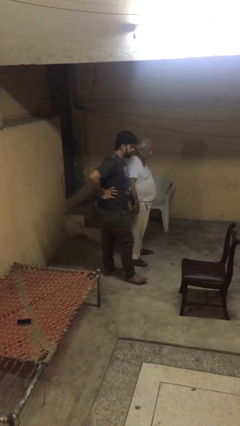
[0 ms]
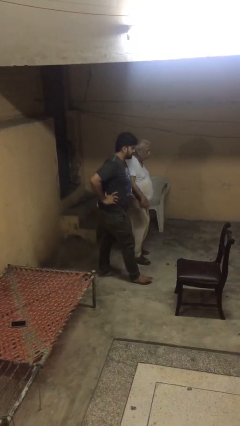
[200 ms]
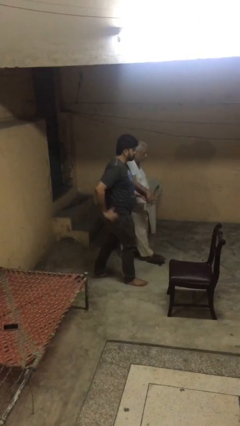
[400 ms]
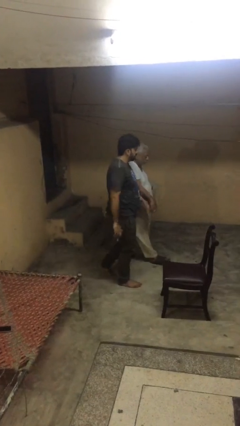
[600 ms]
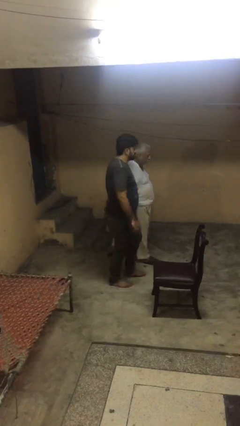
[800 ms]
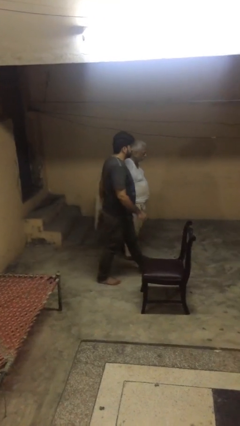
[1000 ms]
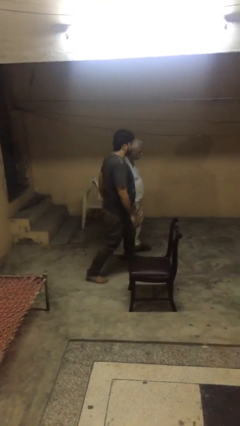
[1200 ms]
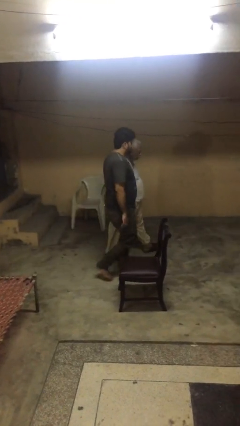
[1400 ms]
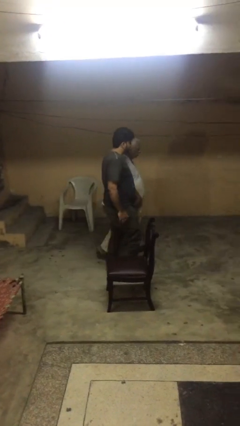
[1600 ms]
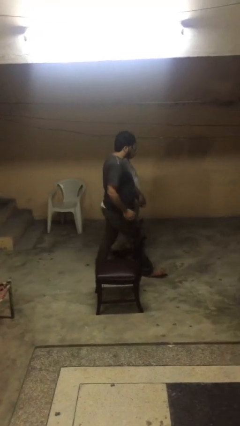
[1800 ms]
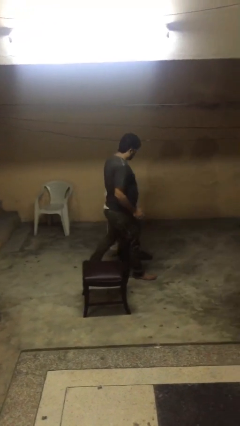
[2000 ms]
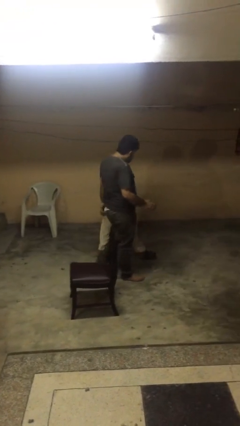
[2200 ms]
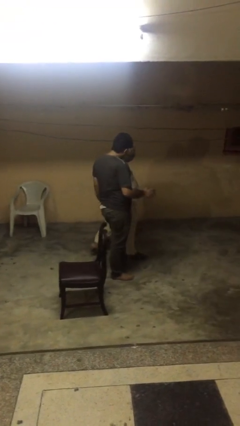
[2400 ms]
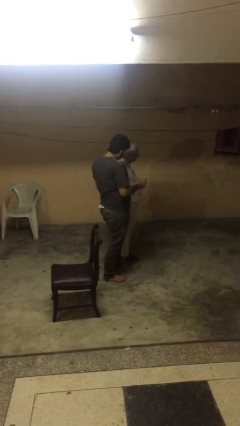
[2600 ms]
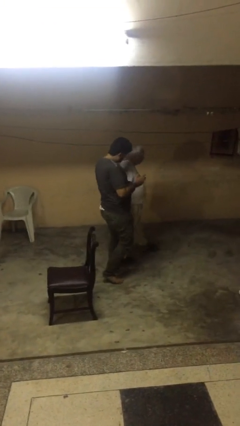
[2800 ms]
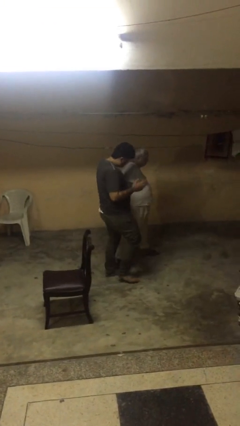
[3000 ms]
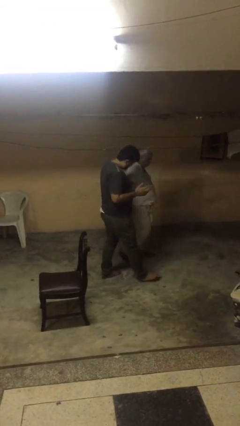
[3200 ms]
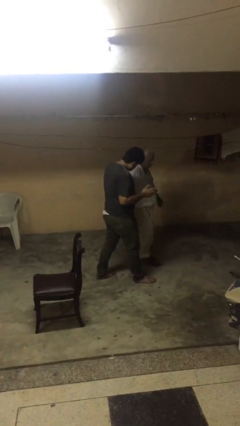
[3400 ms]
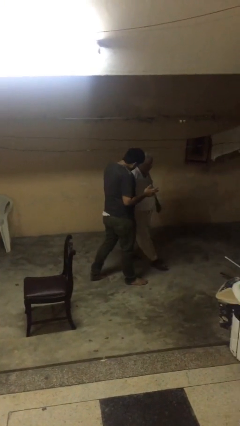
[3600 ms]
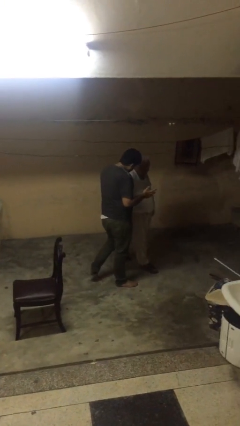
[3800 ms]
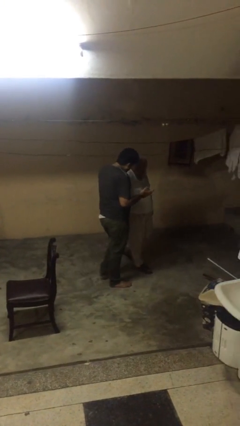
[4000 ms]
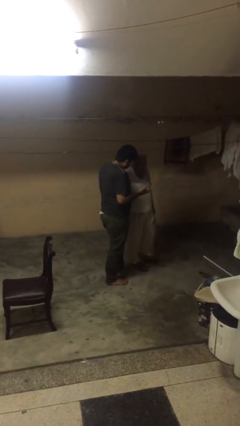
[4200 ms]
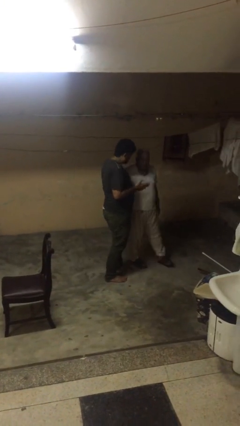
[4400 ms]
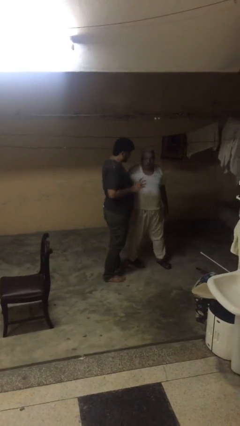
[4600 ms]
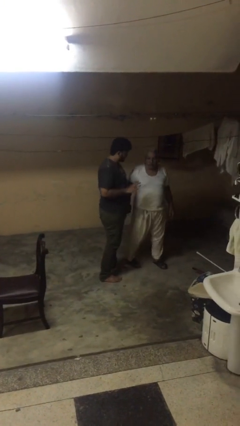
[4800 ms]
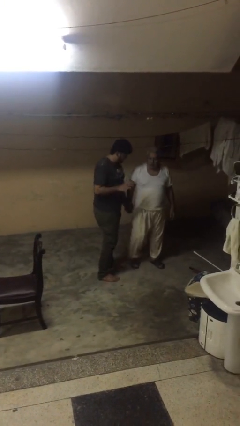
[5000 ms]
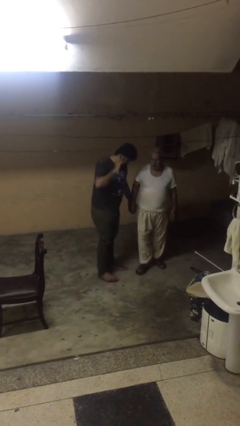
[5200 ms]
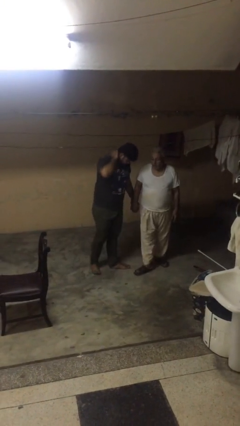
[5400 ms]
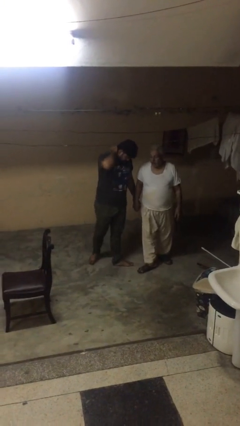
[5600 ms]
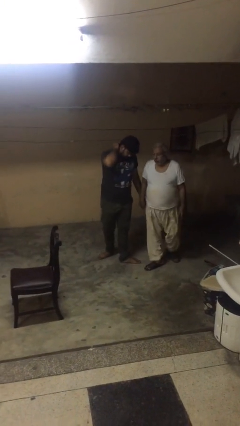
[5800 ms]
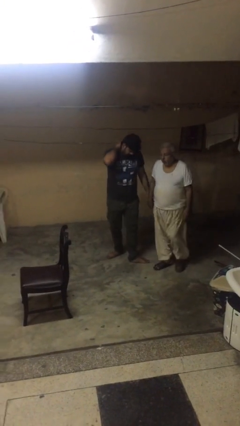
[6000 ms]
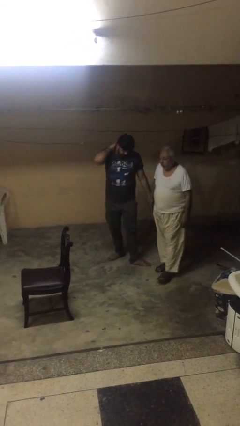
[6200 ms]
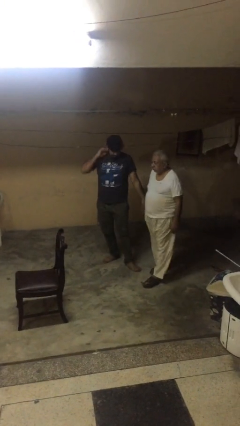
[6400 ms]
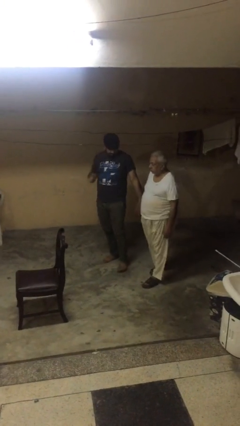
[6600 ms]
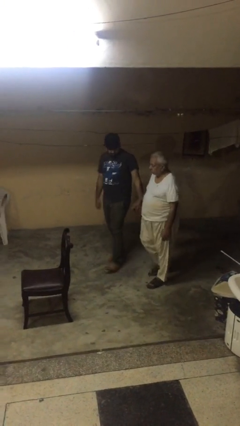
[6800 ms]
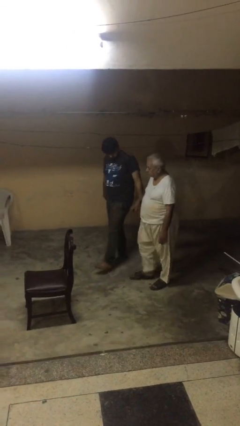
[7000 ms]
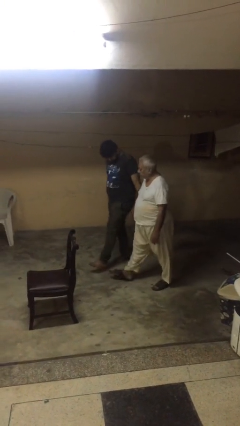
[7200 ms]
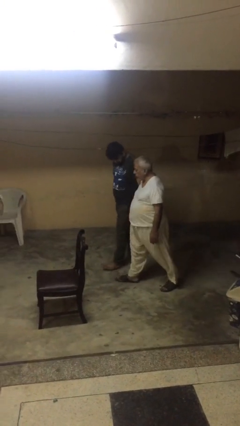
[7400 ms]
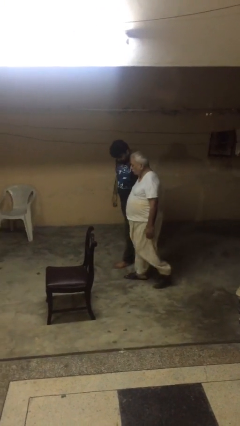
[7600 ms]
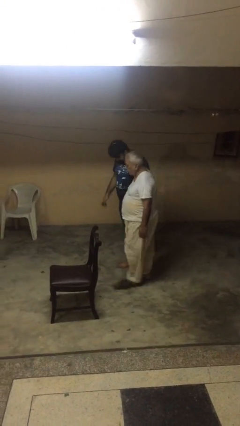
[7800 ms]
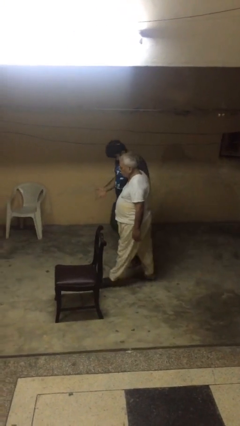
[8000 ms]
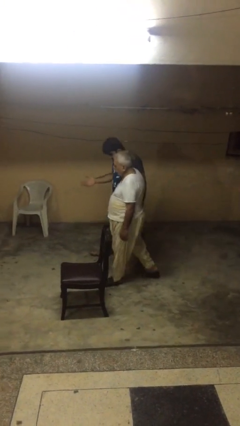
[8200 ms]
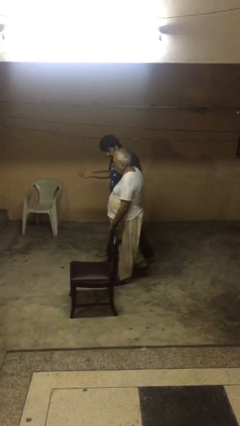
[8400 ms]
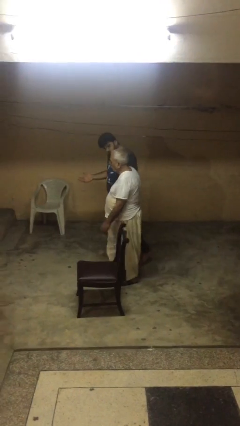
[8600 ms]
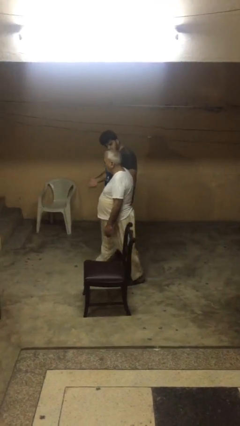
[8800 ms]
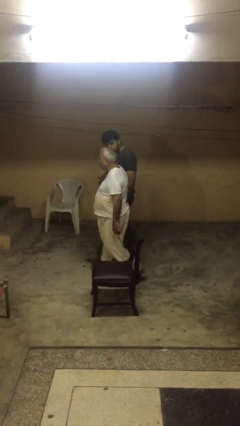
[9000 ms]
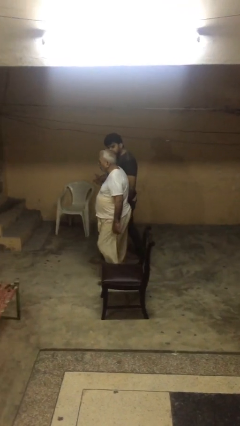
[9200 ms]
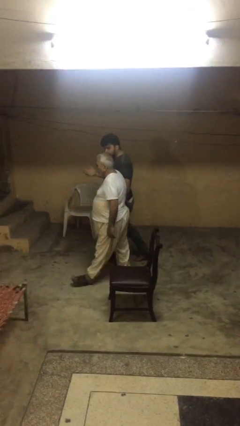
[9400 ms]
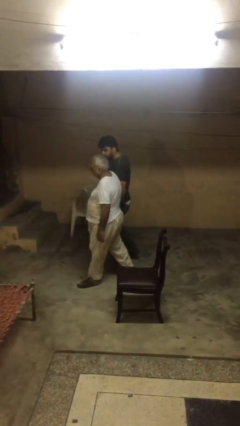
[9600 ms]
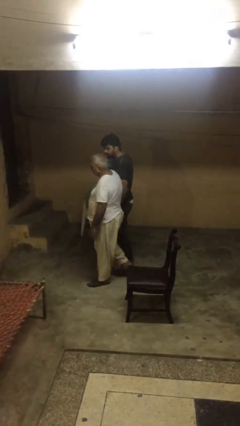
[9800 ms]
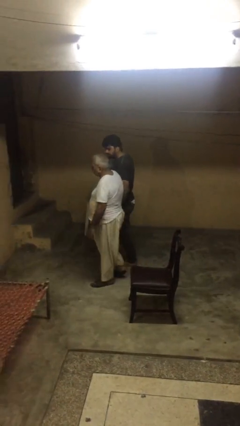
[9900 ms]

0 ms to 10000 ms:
person holds hand

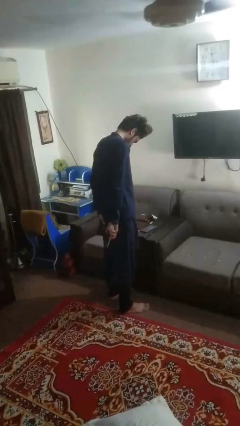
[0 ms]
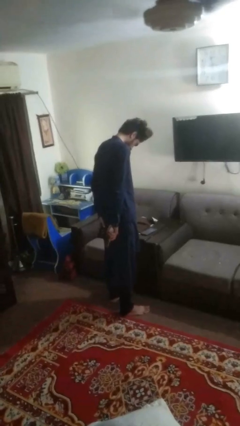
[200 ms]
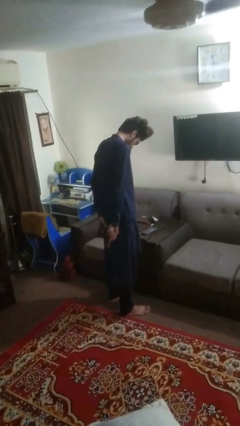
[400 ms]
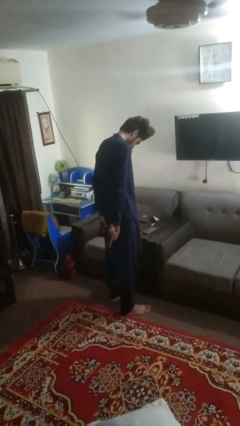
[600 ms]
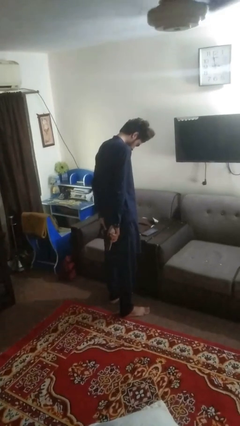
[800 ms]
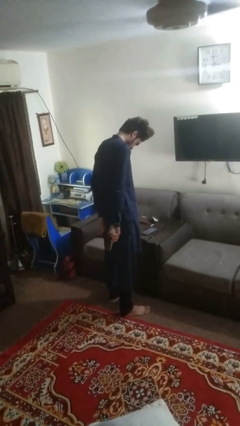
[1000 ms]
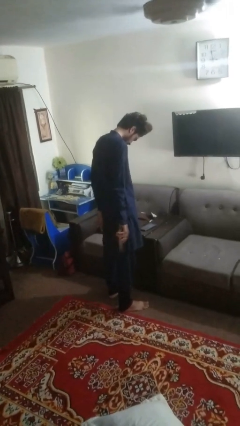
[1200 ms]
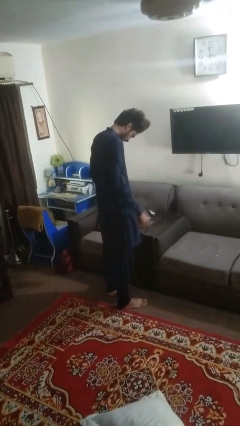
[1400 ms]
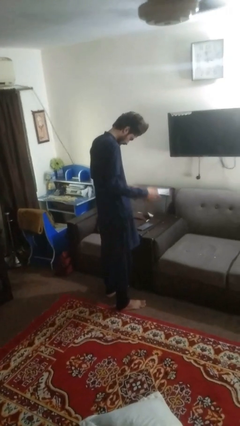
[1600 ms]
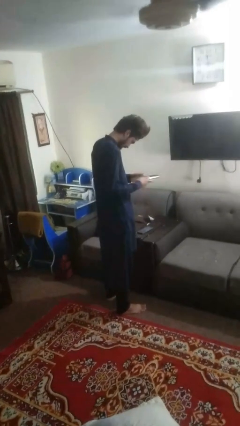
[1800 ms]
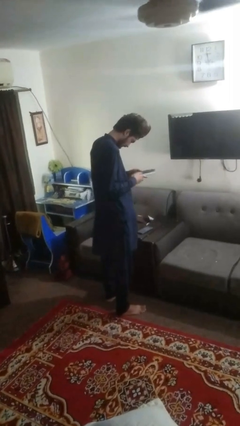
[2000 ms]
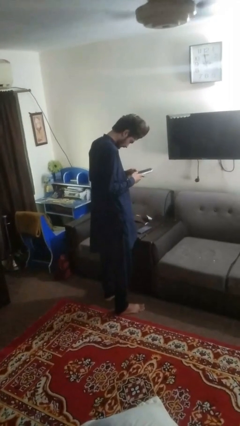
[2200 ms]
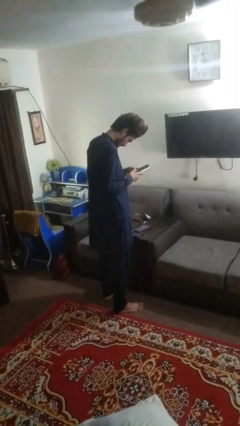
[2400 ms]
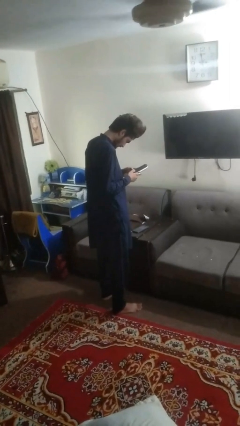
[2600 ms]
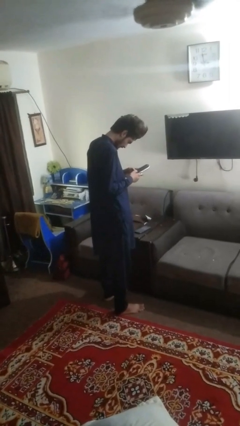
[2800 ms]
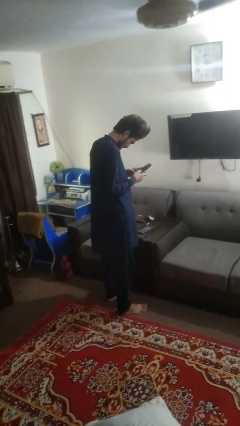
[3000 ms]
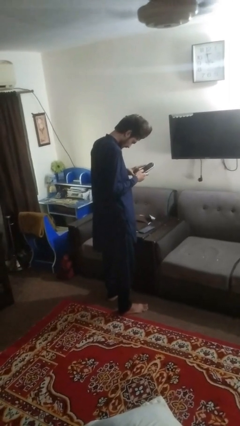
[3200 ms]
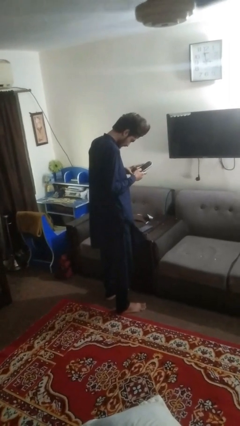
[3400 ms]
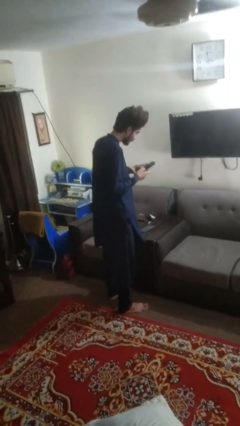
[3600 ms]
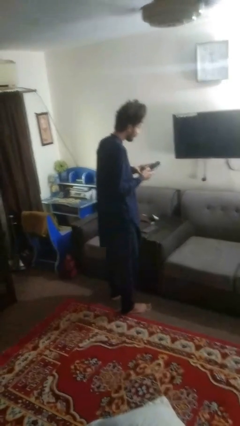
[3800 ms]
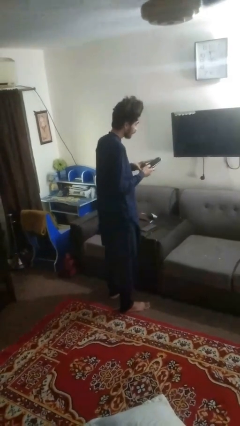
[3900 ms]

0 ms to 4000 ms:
person uses television remote

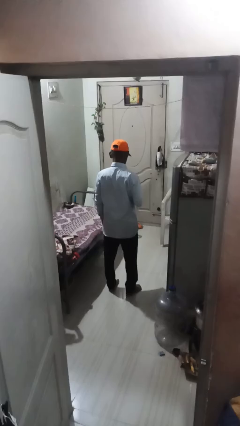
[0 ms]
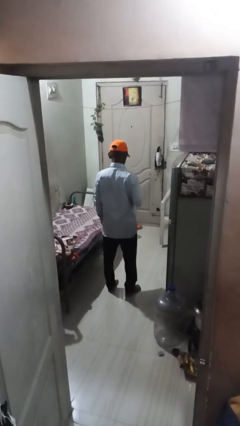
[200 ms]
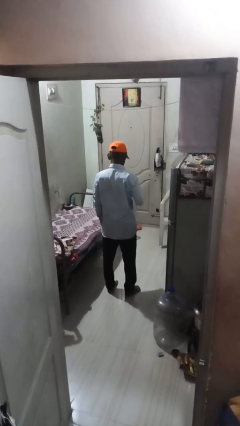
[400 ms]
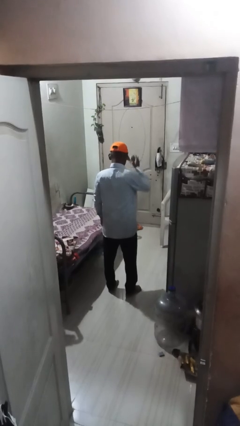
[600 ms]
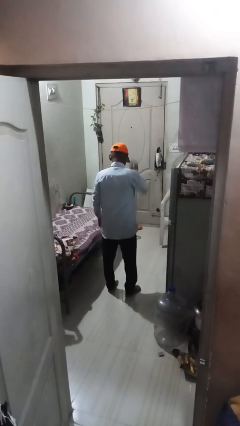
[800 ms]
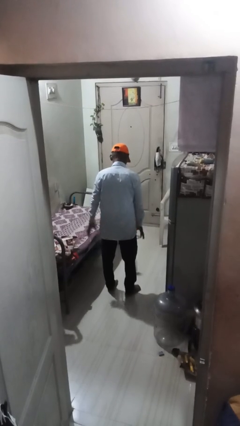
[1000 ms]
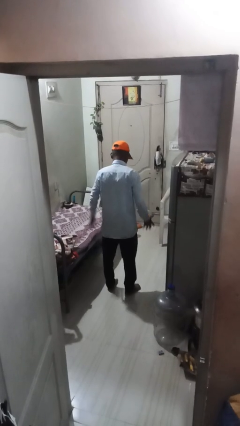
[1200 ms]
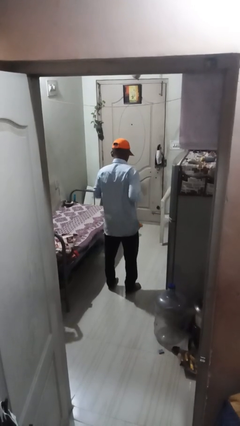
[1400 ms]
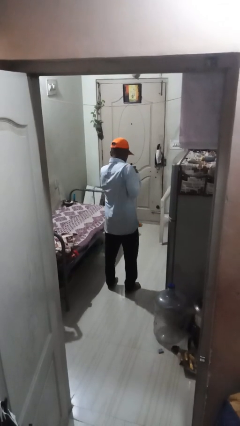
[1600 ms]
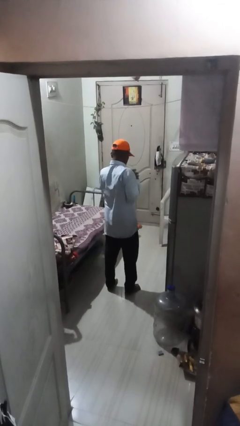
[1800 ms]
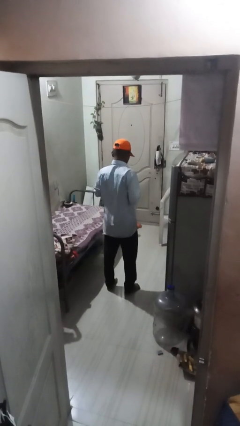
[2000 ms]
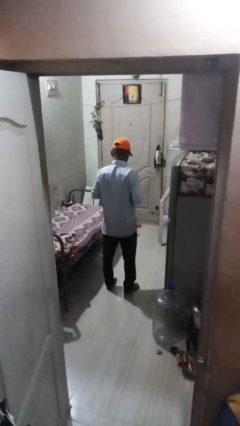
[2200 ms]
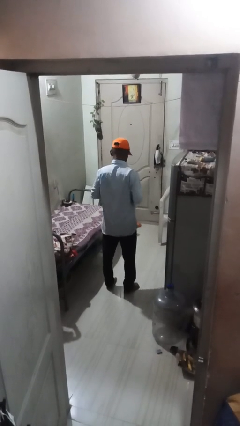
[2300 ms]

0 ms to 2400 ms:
person bounces ball on floor

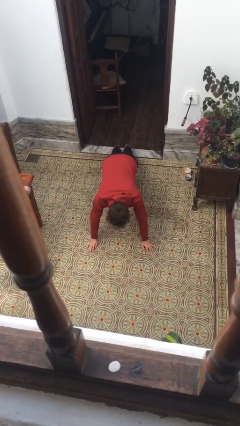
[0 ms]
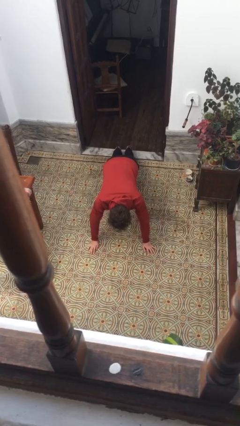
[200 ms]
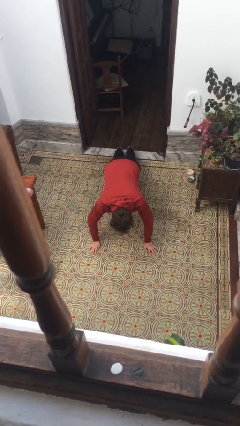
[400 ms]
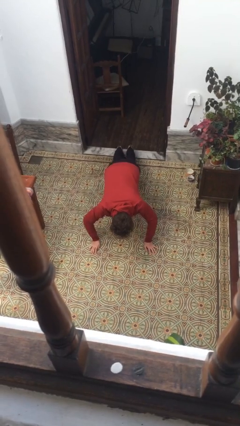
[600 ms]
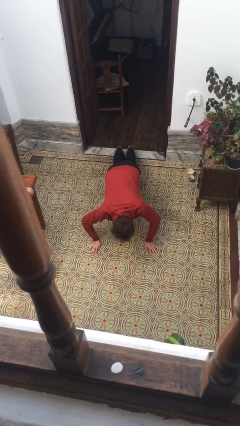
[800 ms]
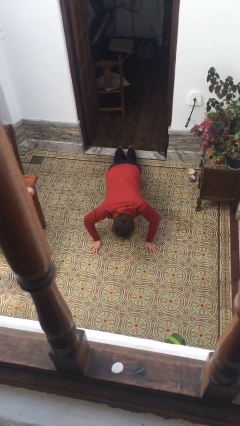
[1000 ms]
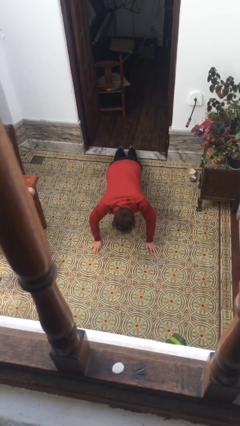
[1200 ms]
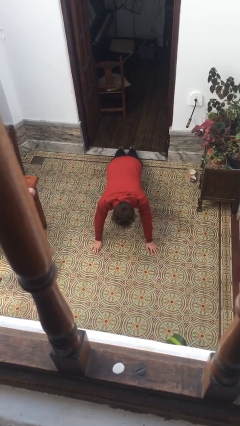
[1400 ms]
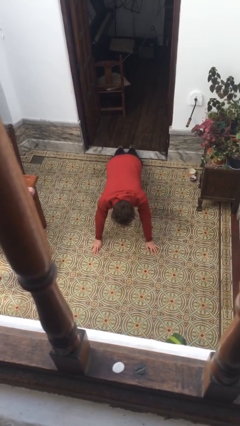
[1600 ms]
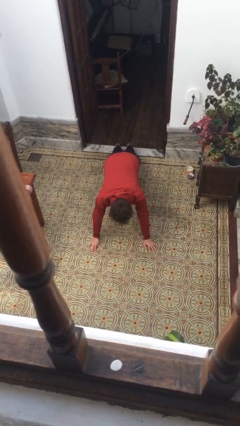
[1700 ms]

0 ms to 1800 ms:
person exercises with pushup
